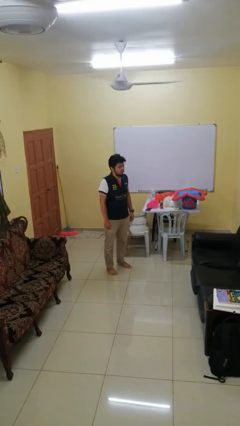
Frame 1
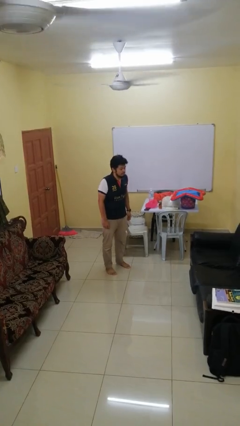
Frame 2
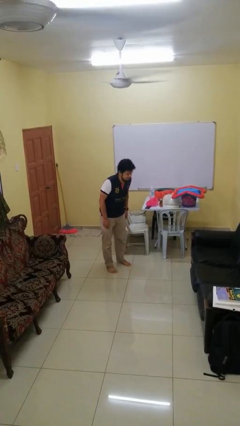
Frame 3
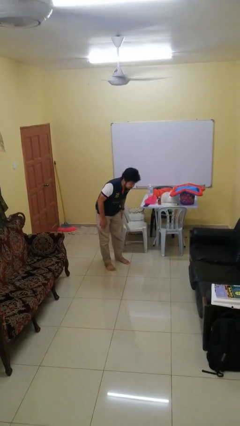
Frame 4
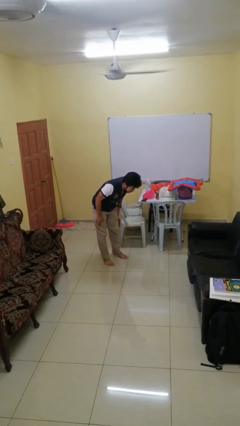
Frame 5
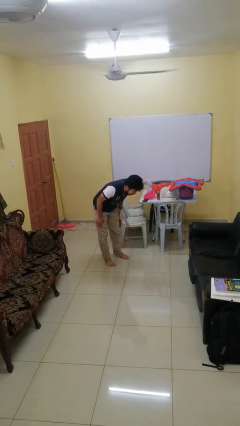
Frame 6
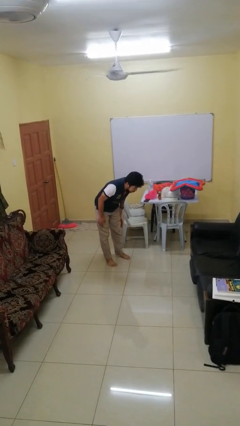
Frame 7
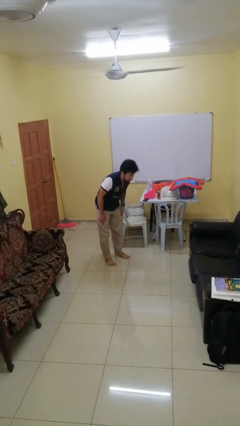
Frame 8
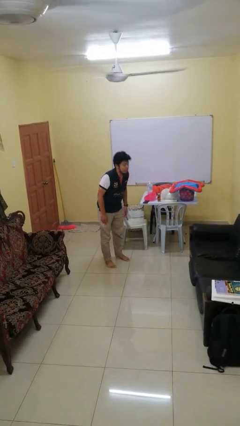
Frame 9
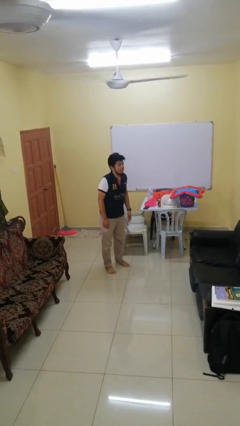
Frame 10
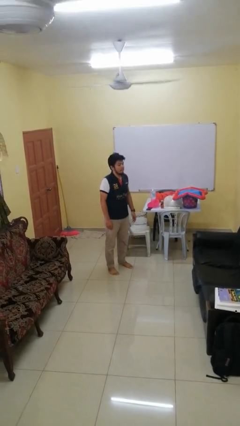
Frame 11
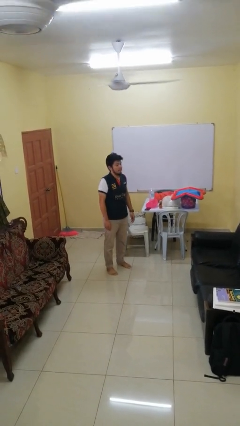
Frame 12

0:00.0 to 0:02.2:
person bows

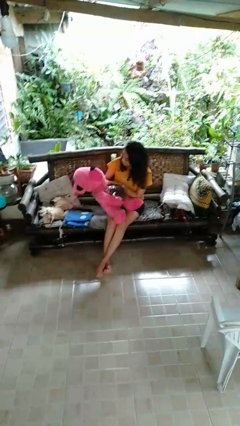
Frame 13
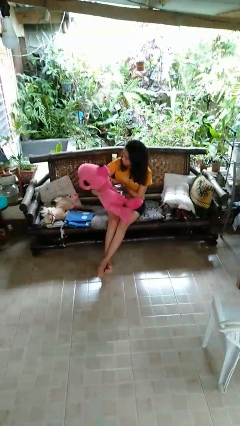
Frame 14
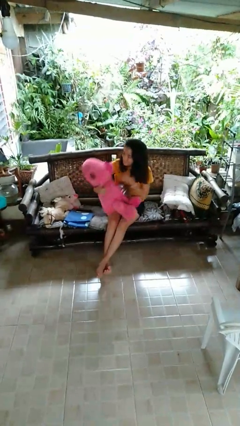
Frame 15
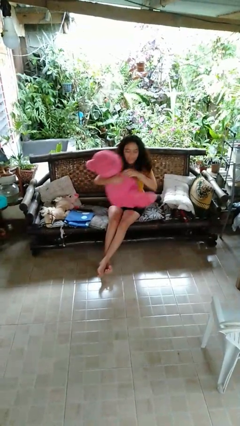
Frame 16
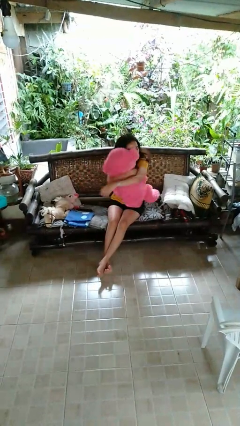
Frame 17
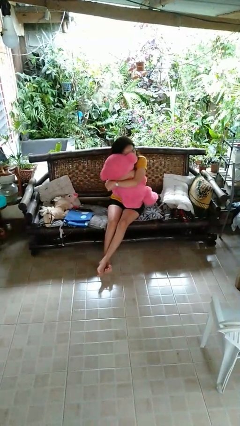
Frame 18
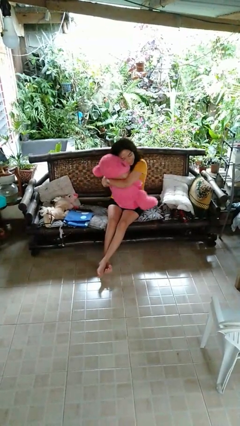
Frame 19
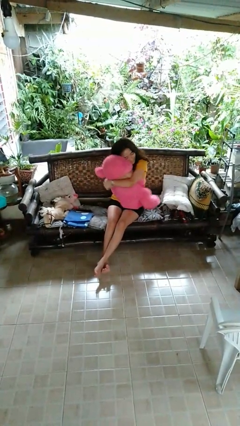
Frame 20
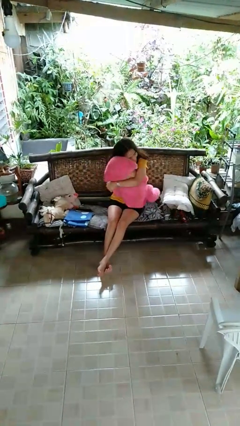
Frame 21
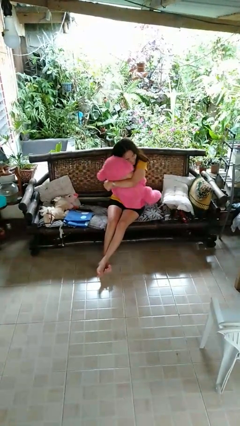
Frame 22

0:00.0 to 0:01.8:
person hugs stuffed animal

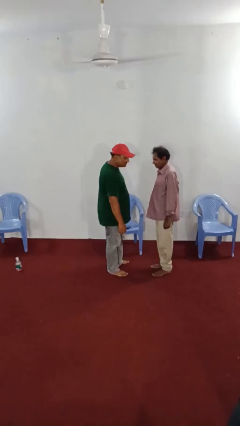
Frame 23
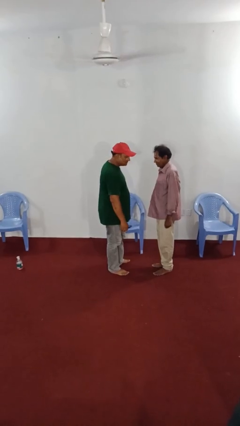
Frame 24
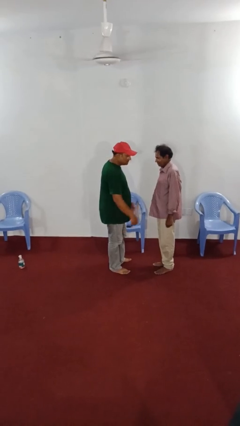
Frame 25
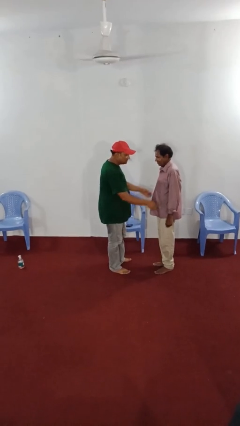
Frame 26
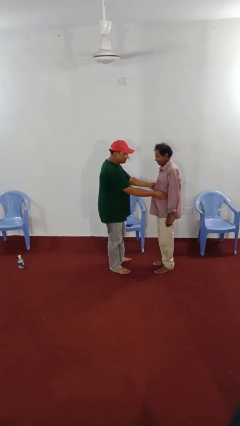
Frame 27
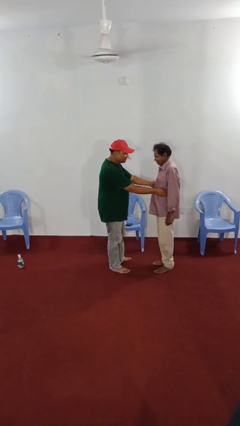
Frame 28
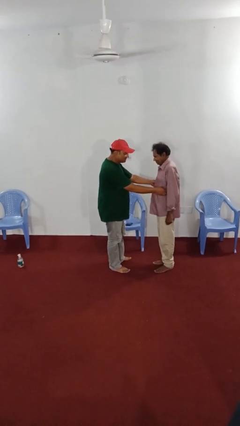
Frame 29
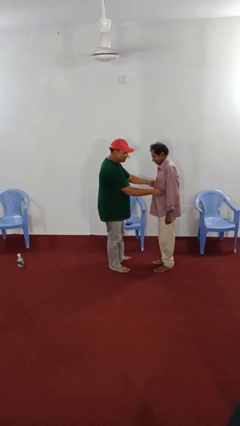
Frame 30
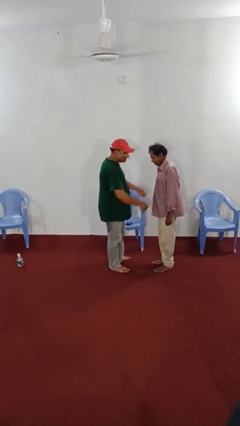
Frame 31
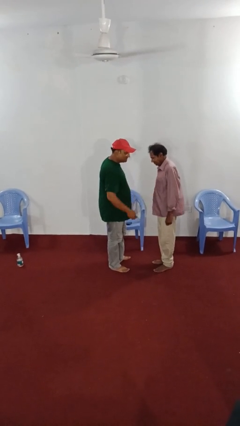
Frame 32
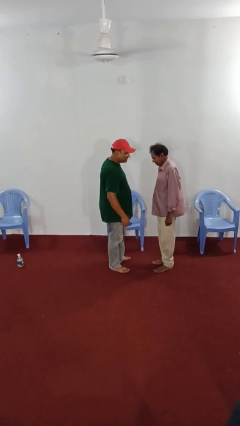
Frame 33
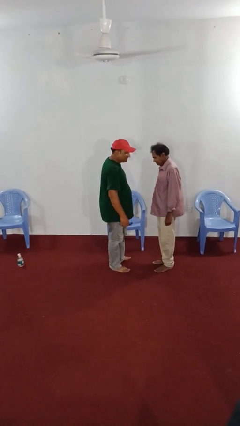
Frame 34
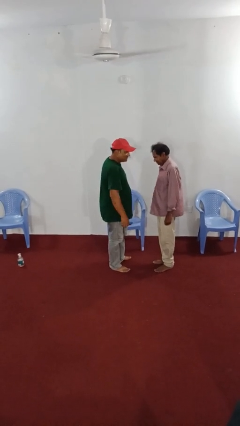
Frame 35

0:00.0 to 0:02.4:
person tickles person

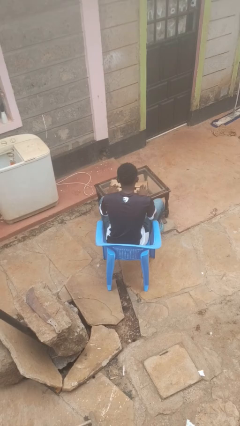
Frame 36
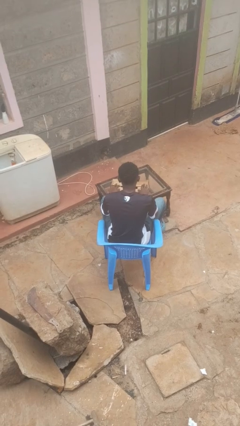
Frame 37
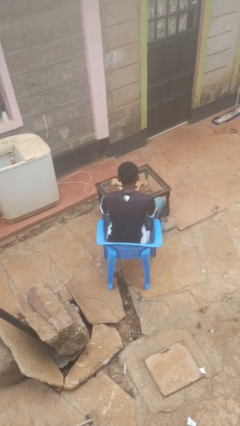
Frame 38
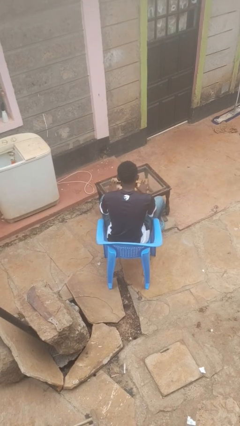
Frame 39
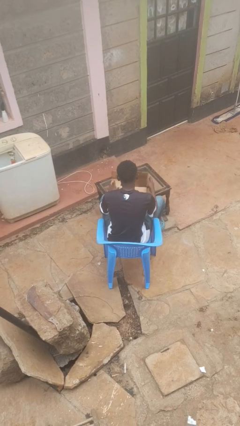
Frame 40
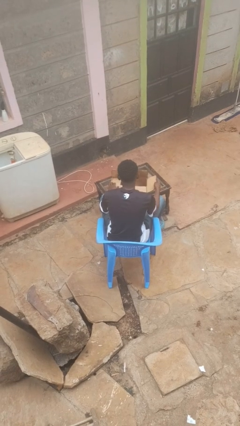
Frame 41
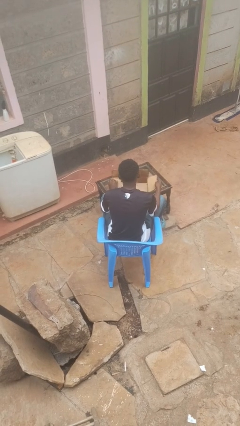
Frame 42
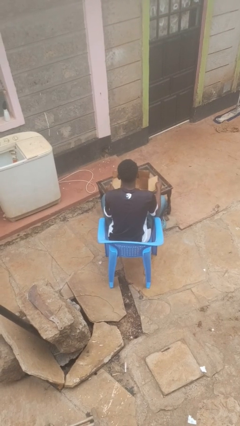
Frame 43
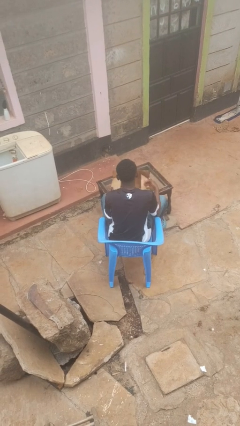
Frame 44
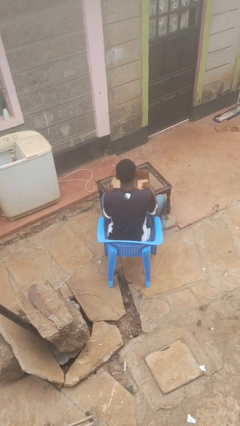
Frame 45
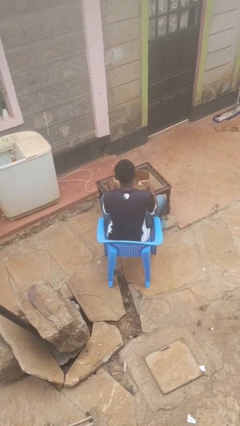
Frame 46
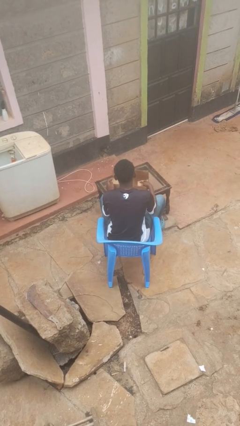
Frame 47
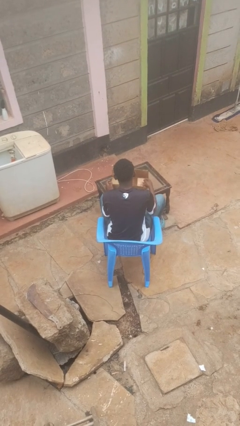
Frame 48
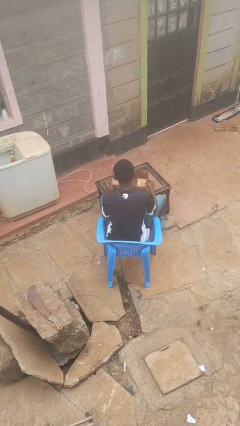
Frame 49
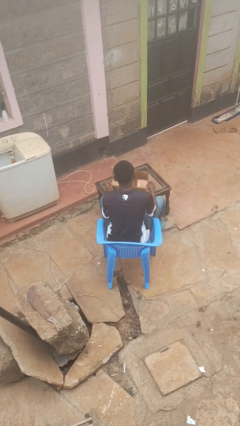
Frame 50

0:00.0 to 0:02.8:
person opens box

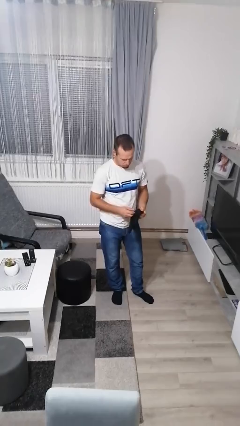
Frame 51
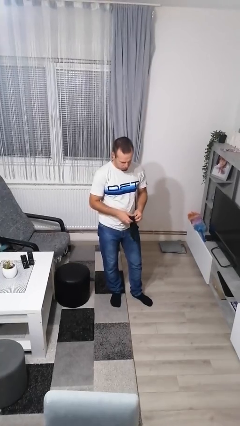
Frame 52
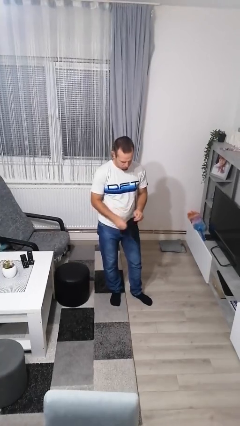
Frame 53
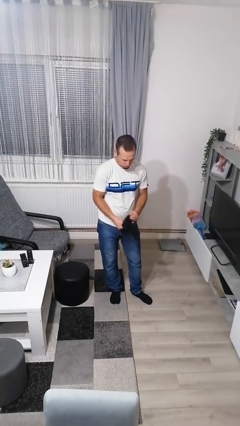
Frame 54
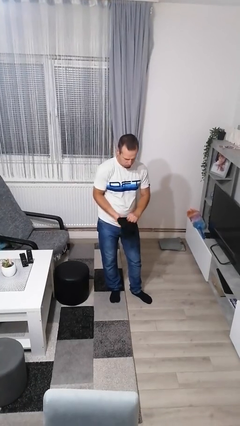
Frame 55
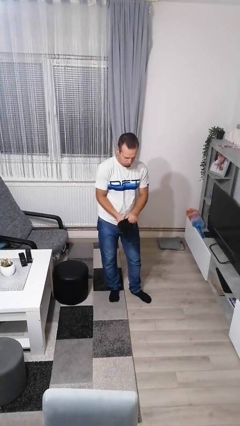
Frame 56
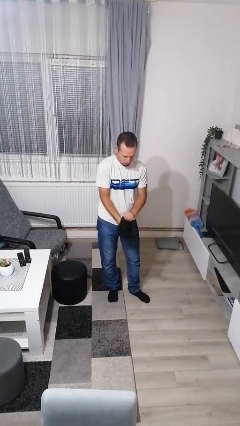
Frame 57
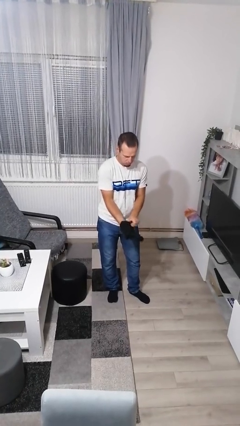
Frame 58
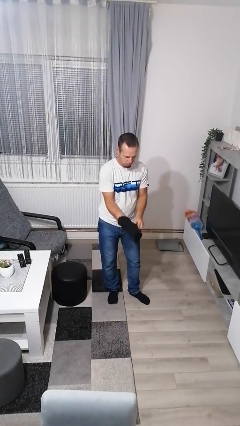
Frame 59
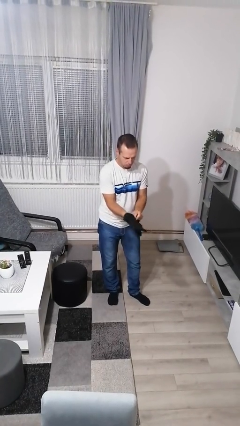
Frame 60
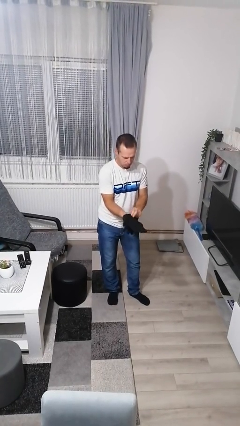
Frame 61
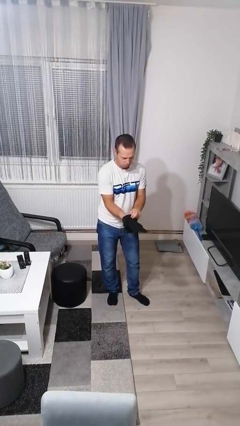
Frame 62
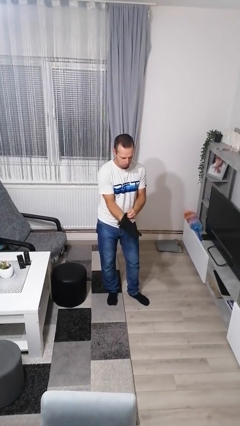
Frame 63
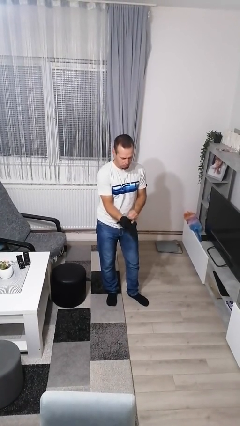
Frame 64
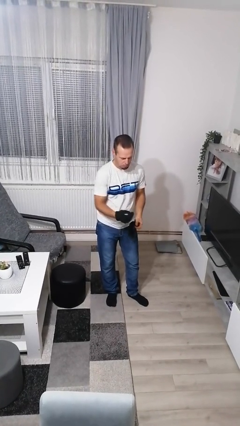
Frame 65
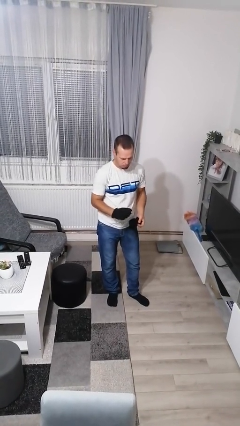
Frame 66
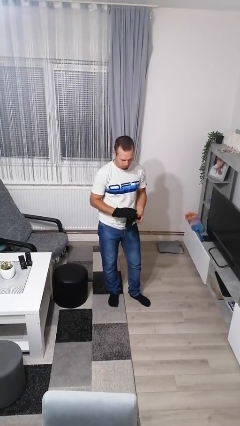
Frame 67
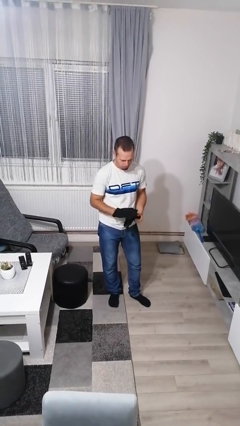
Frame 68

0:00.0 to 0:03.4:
person puts on gloves

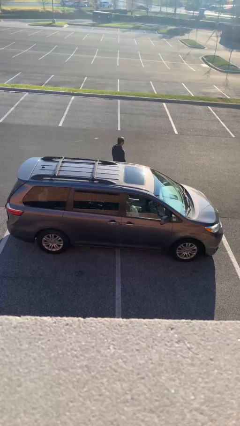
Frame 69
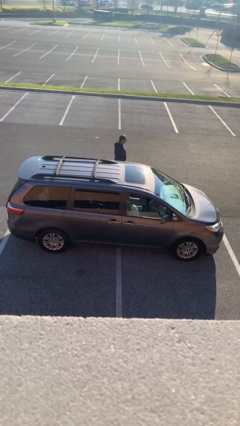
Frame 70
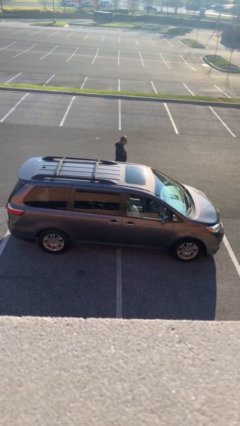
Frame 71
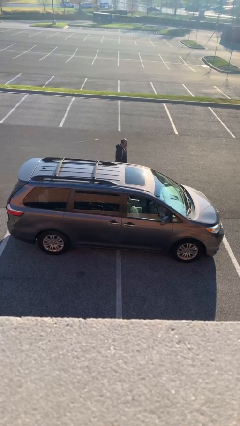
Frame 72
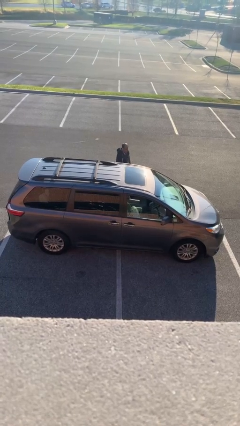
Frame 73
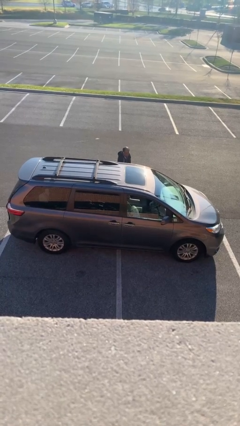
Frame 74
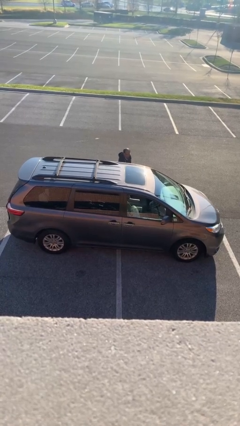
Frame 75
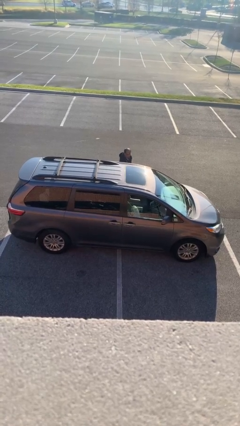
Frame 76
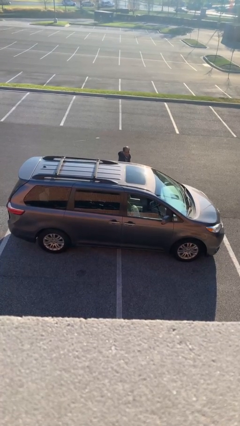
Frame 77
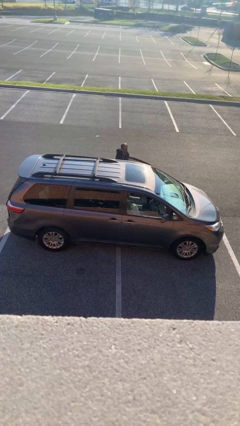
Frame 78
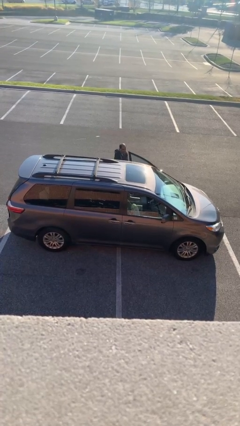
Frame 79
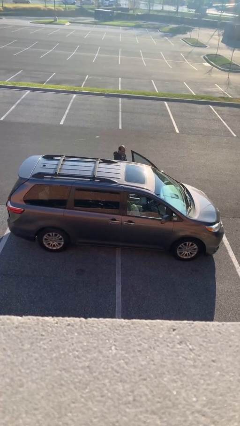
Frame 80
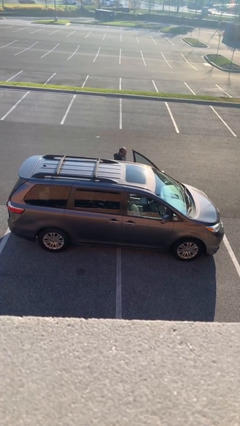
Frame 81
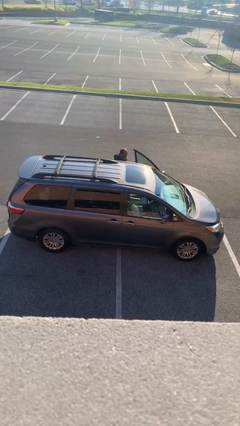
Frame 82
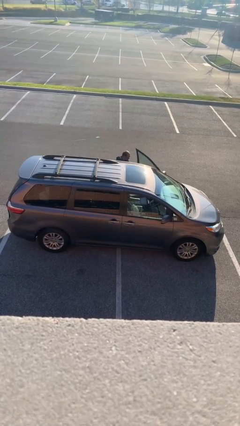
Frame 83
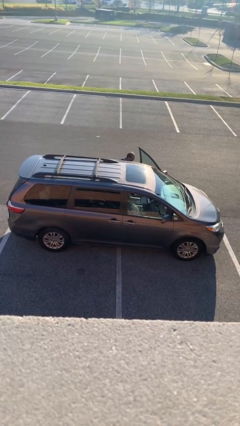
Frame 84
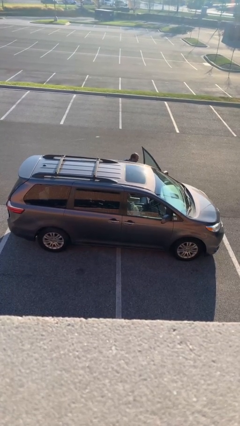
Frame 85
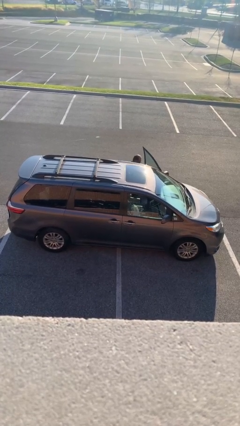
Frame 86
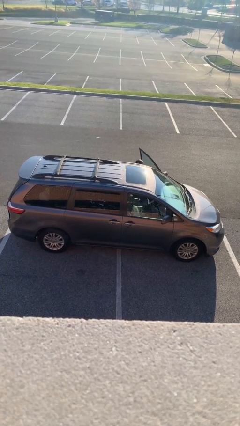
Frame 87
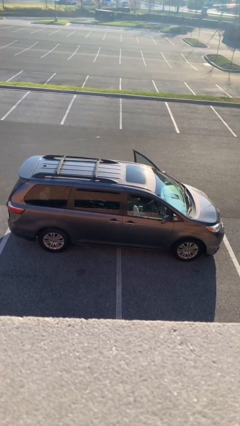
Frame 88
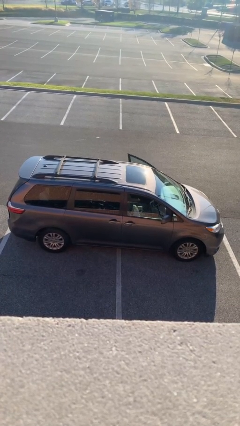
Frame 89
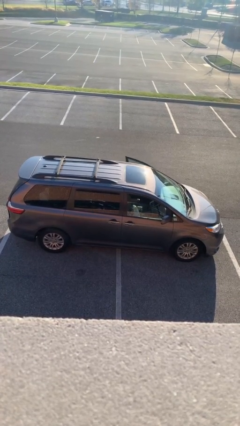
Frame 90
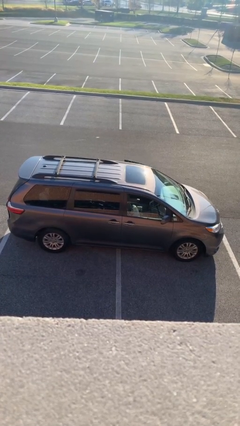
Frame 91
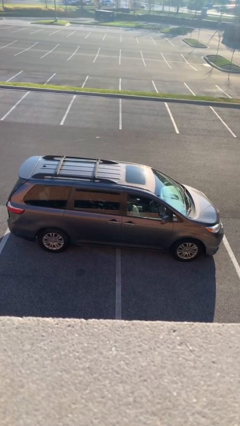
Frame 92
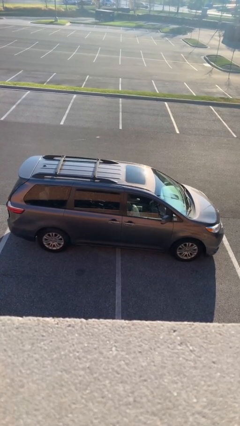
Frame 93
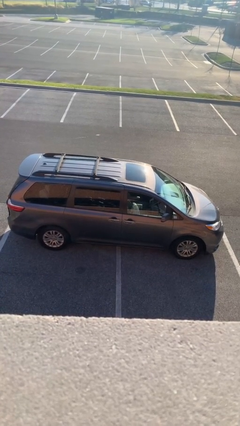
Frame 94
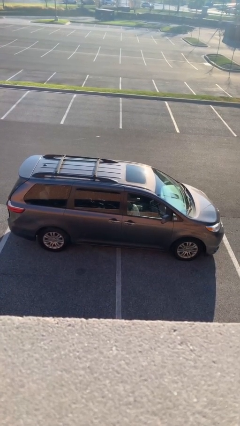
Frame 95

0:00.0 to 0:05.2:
car picks up person
